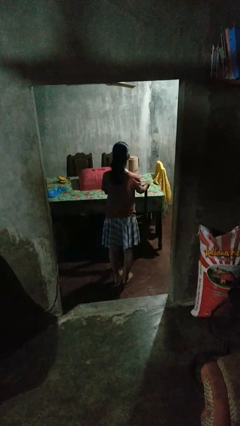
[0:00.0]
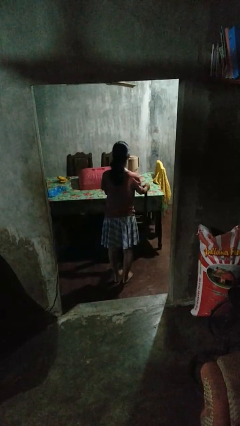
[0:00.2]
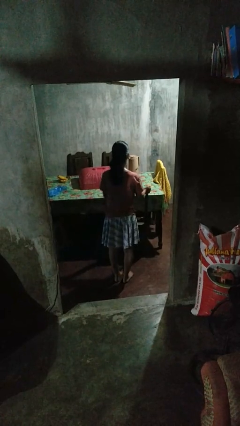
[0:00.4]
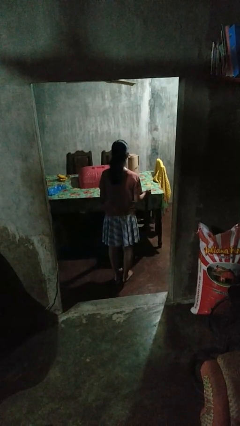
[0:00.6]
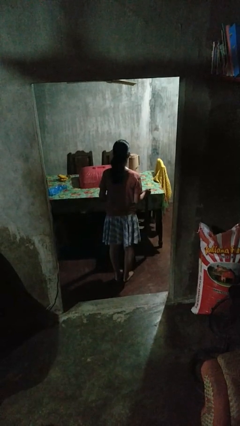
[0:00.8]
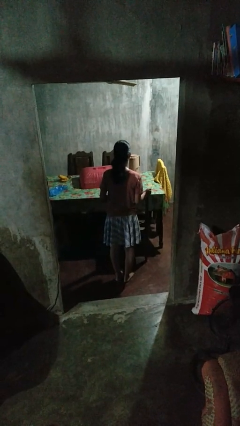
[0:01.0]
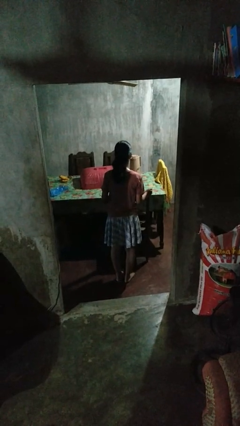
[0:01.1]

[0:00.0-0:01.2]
person pulls out chair

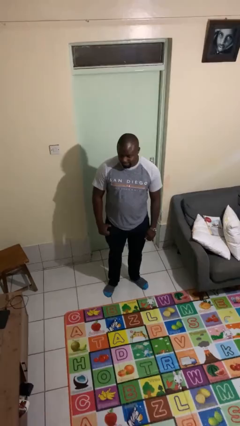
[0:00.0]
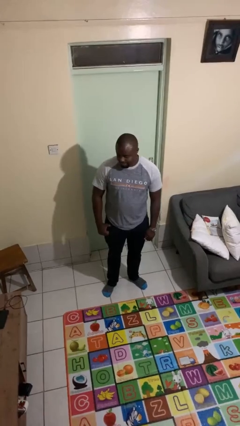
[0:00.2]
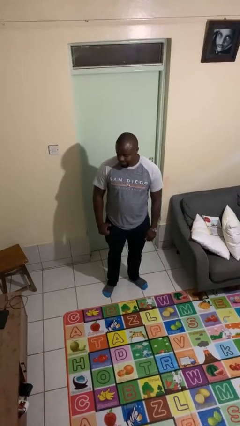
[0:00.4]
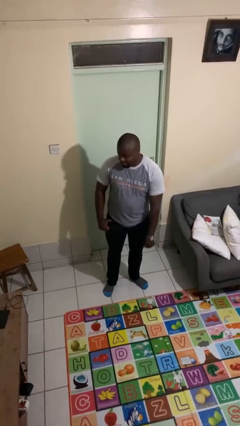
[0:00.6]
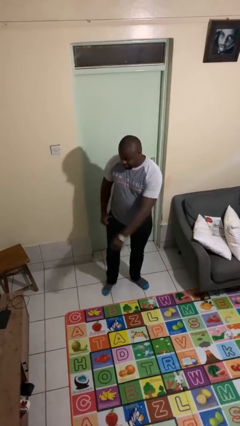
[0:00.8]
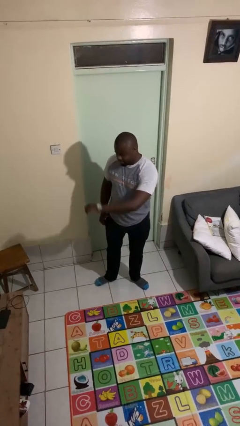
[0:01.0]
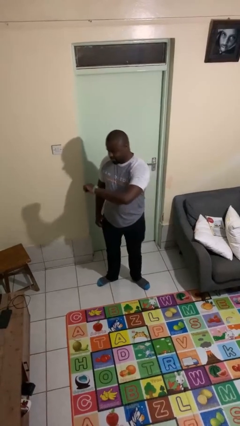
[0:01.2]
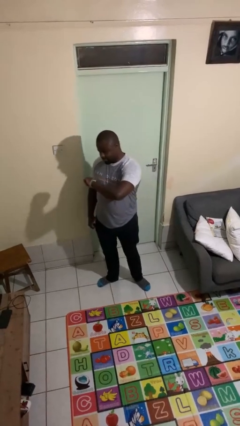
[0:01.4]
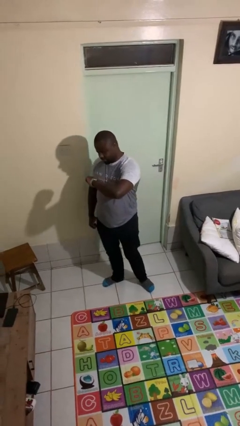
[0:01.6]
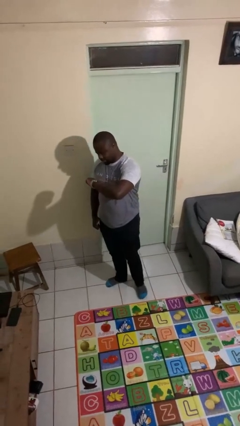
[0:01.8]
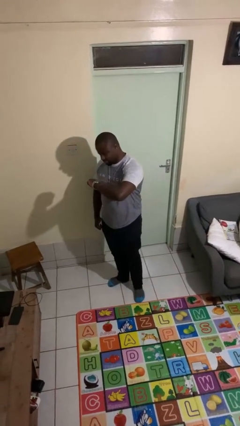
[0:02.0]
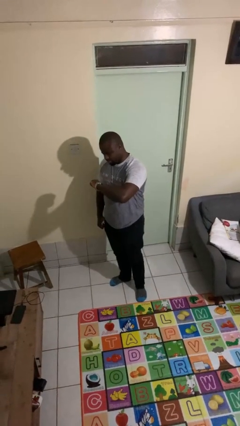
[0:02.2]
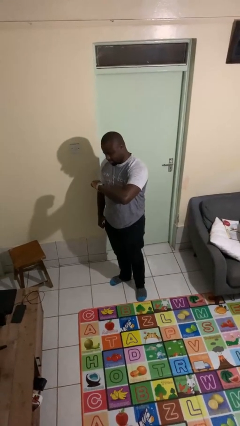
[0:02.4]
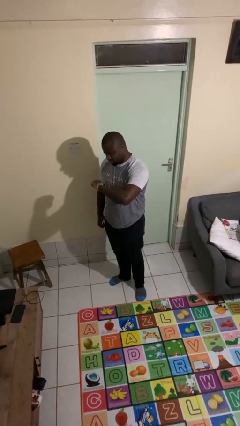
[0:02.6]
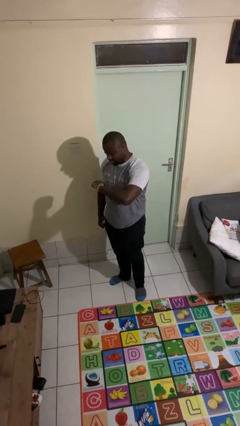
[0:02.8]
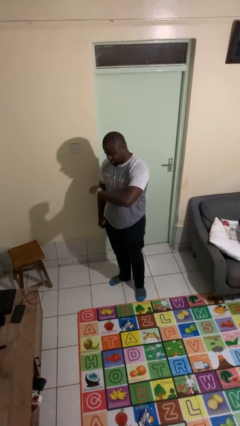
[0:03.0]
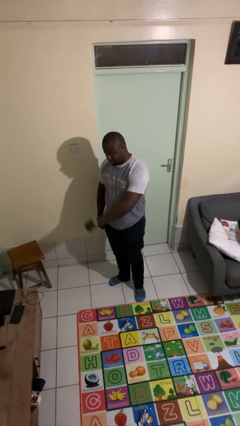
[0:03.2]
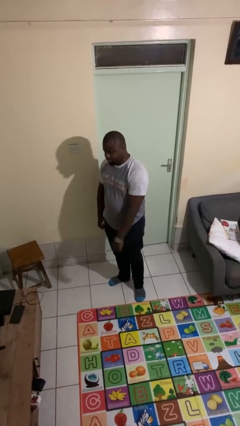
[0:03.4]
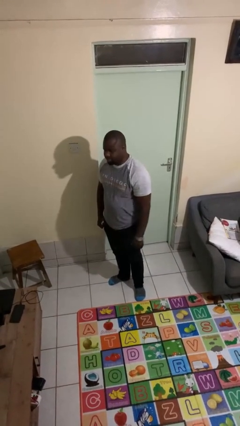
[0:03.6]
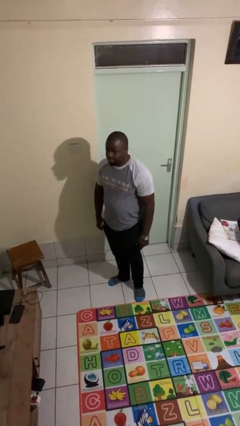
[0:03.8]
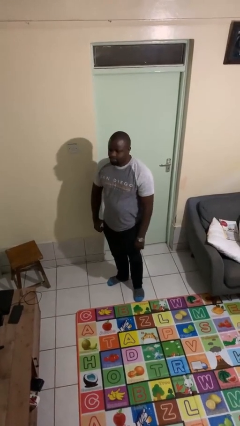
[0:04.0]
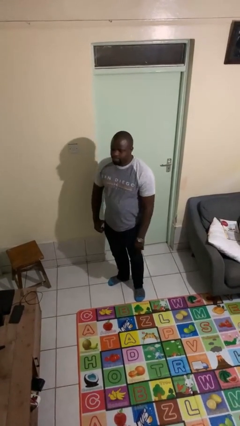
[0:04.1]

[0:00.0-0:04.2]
person looks at wristwatch

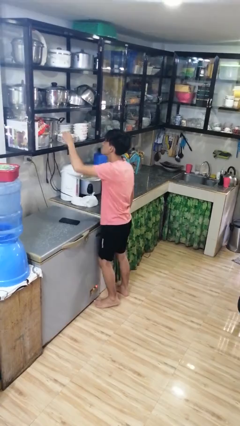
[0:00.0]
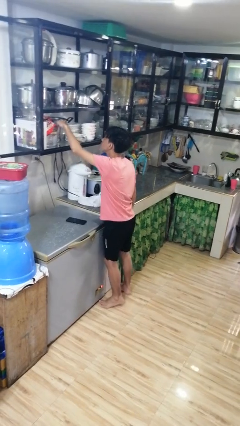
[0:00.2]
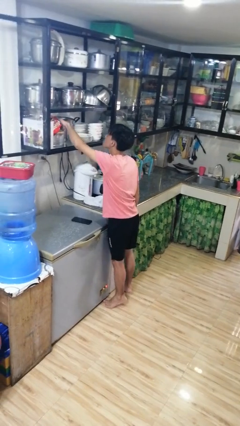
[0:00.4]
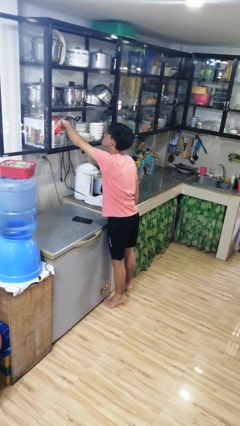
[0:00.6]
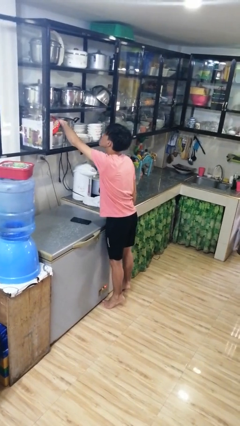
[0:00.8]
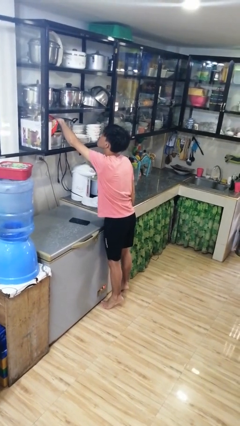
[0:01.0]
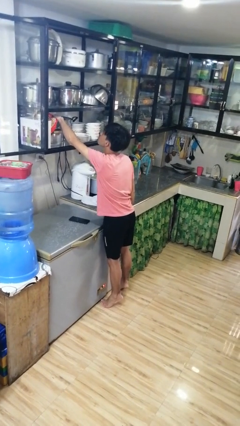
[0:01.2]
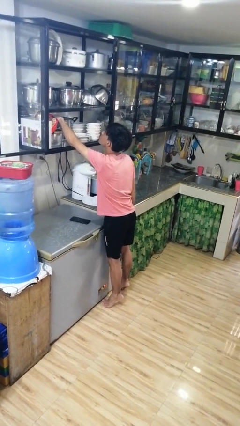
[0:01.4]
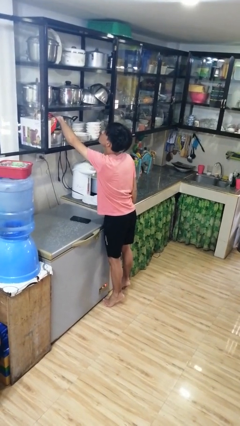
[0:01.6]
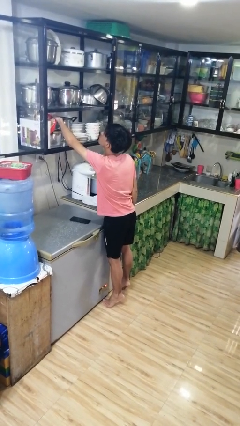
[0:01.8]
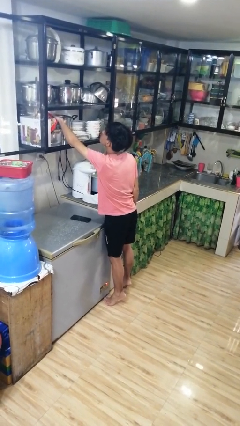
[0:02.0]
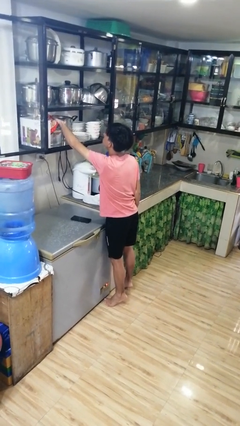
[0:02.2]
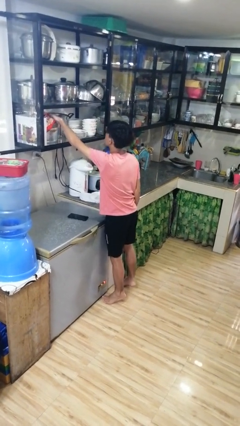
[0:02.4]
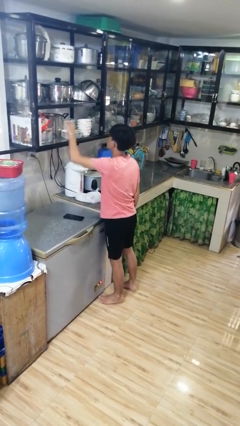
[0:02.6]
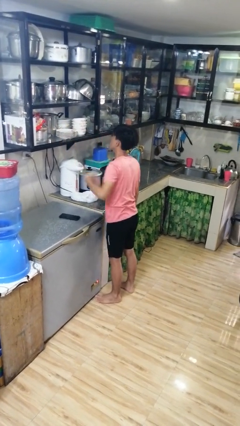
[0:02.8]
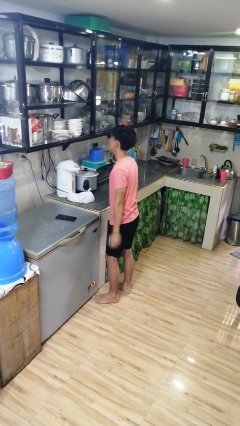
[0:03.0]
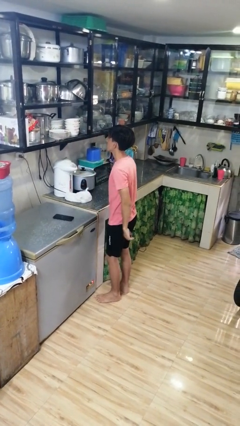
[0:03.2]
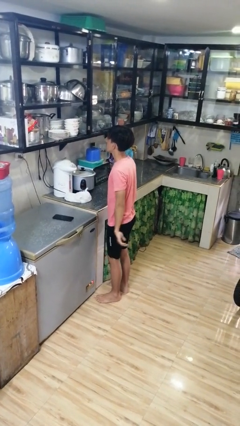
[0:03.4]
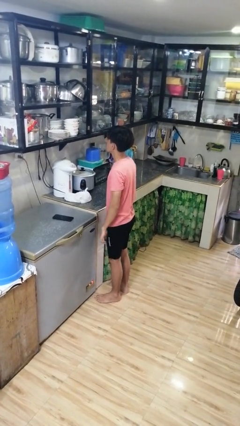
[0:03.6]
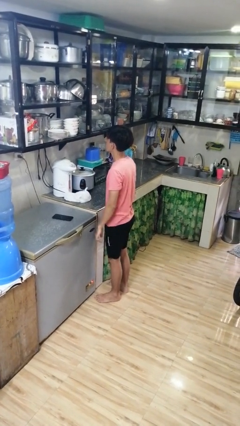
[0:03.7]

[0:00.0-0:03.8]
person puts on backpack

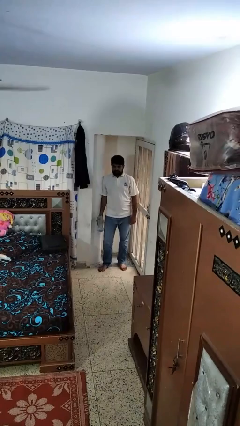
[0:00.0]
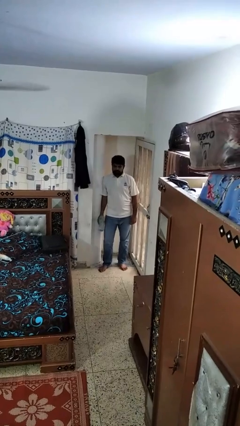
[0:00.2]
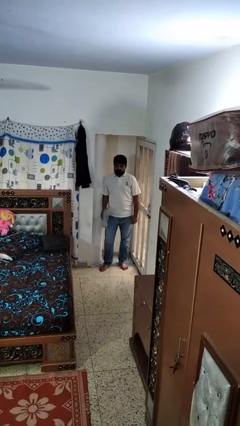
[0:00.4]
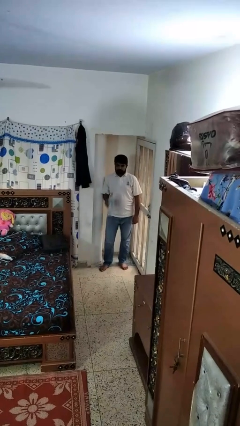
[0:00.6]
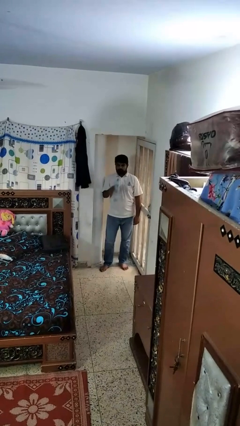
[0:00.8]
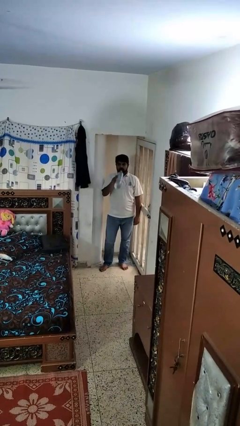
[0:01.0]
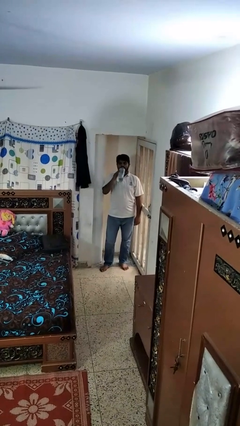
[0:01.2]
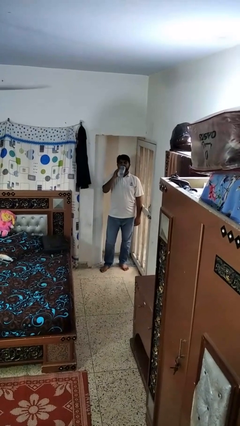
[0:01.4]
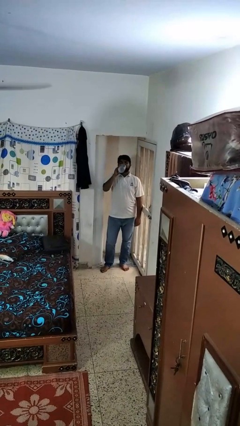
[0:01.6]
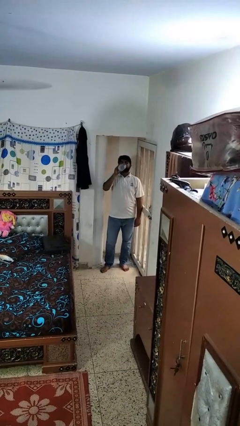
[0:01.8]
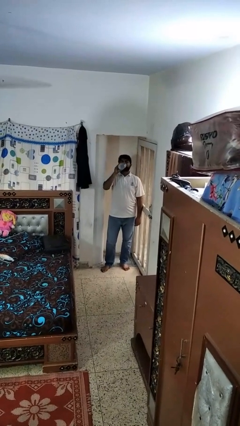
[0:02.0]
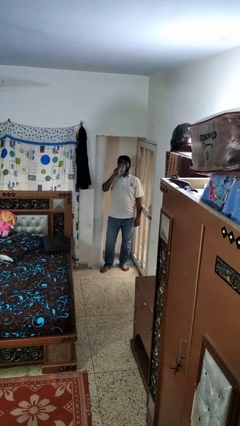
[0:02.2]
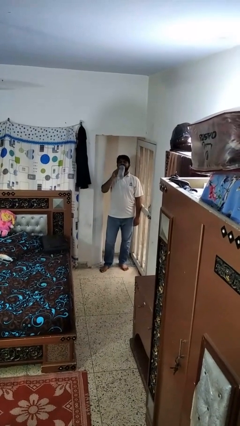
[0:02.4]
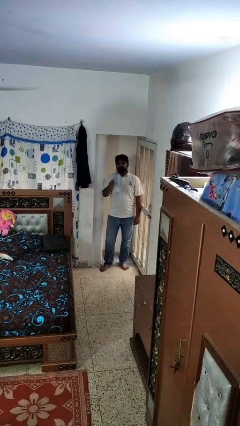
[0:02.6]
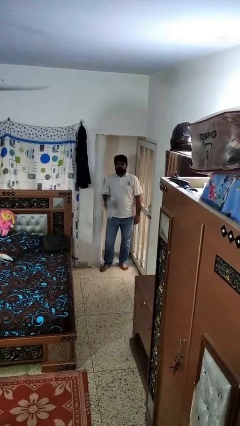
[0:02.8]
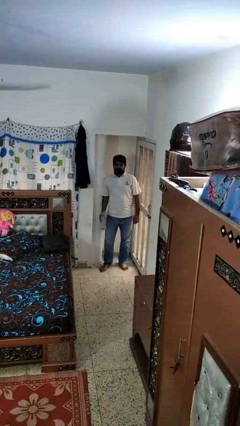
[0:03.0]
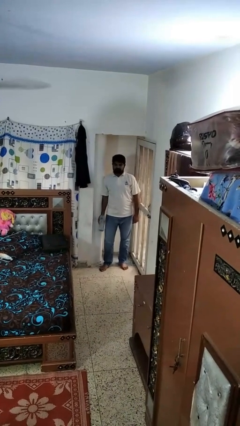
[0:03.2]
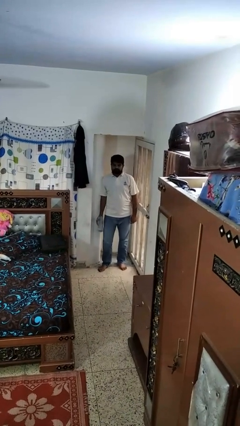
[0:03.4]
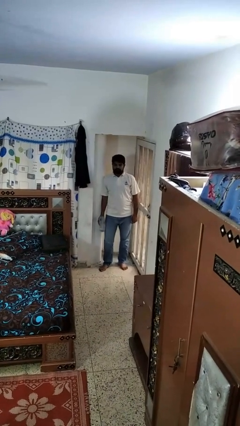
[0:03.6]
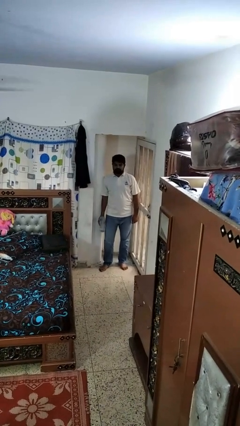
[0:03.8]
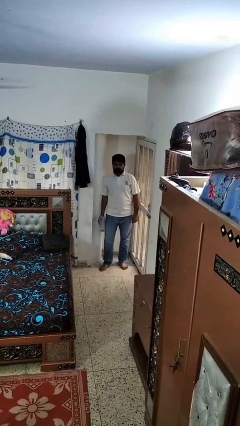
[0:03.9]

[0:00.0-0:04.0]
person drinks from bottle

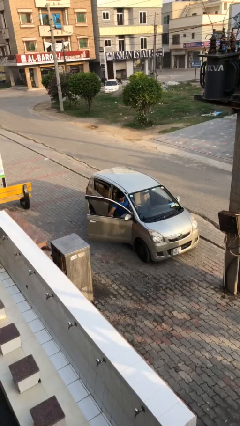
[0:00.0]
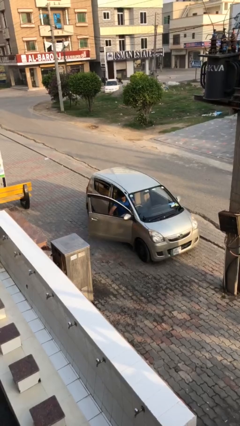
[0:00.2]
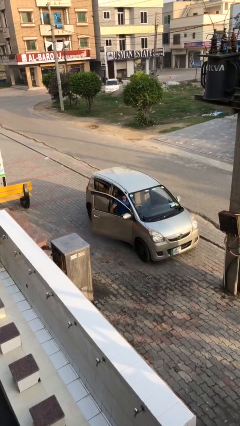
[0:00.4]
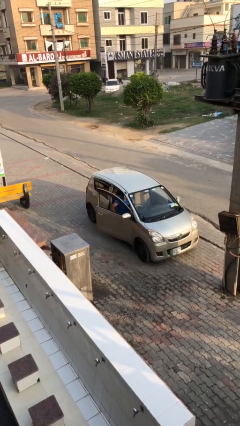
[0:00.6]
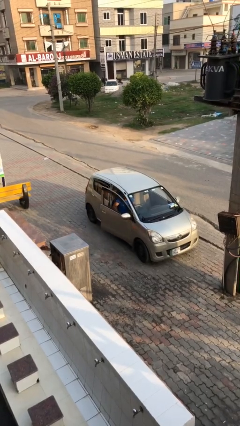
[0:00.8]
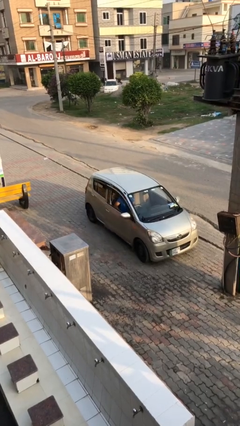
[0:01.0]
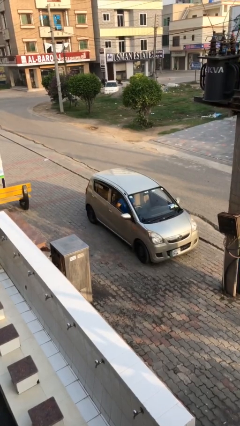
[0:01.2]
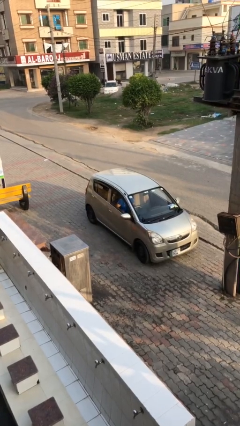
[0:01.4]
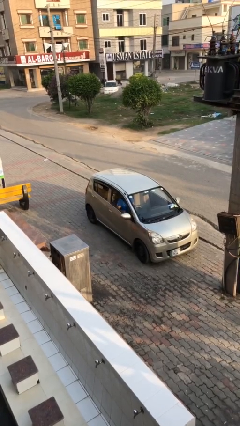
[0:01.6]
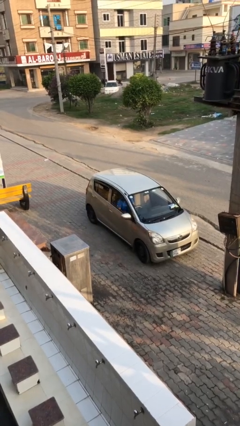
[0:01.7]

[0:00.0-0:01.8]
person closes car door

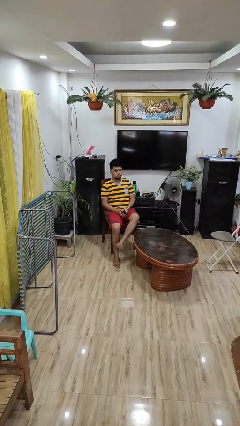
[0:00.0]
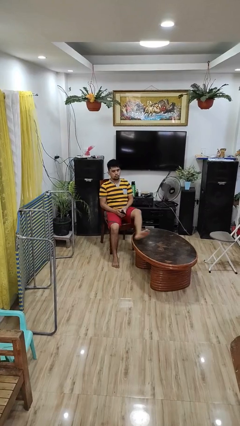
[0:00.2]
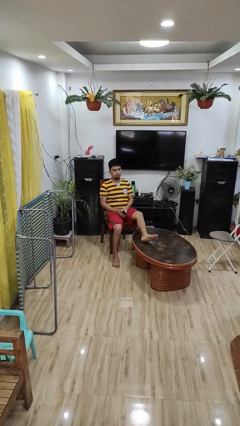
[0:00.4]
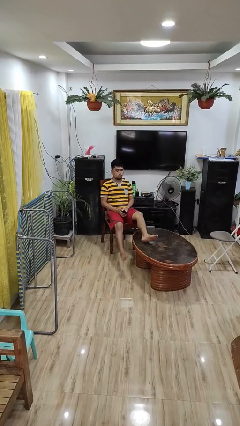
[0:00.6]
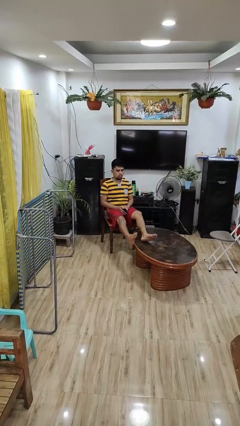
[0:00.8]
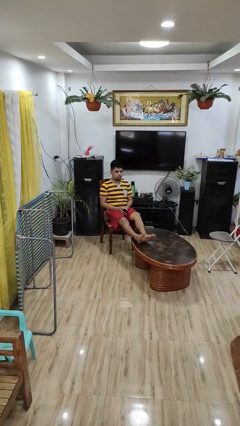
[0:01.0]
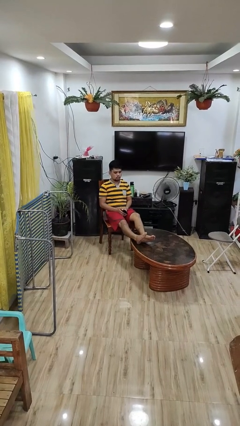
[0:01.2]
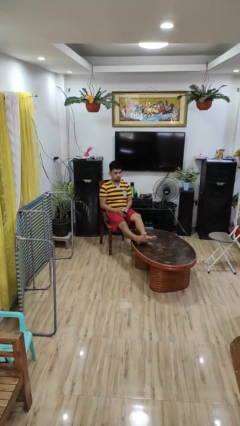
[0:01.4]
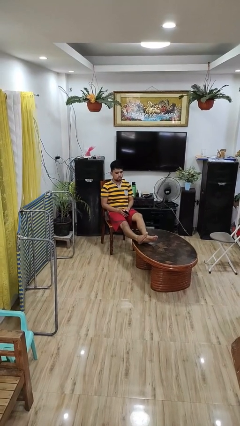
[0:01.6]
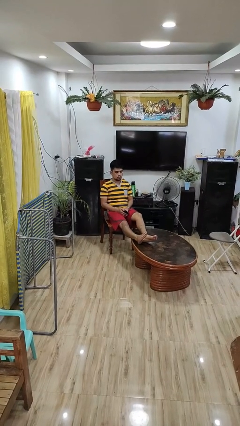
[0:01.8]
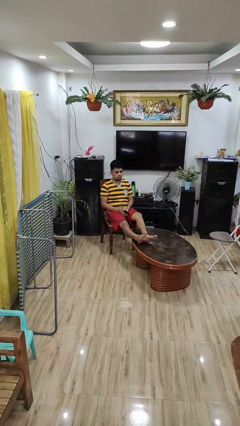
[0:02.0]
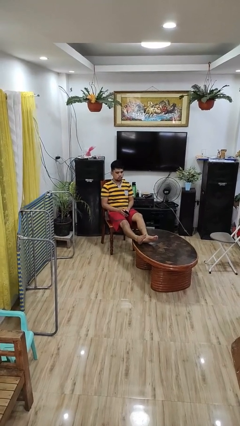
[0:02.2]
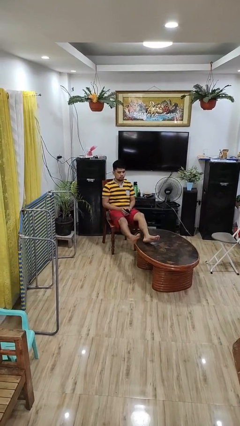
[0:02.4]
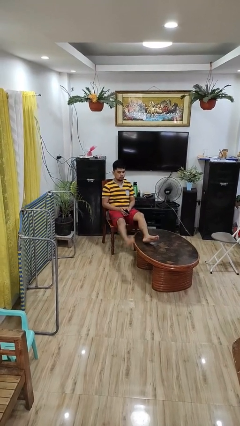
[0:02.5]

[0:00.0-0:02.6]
person puts feet up
